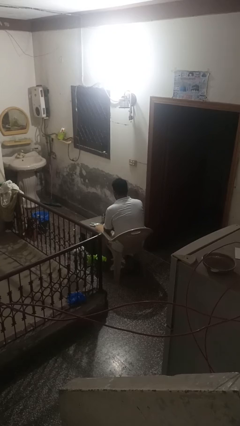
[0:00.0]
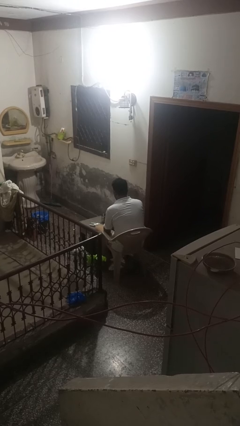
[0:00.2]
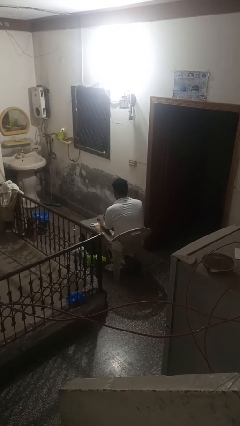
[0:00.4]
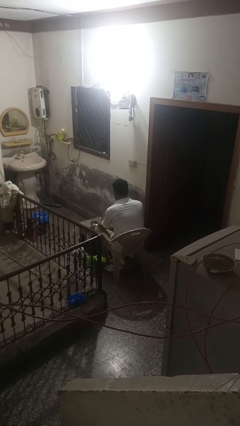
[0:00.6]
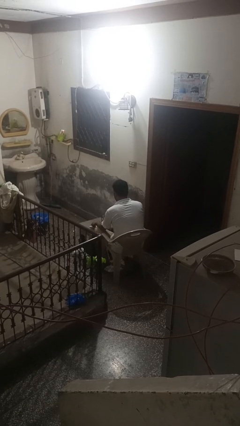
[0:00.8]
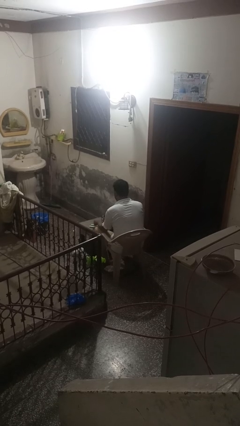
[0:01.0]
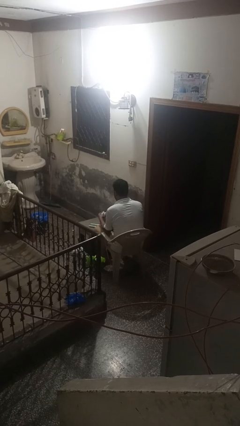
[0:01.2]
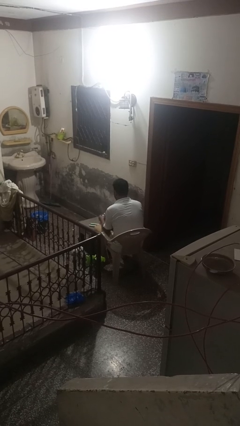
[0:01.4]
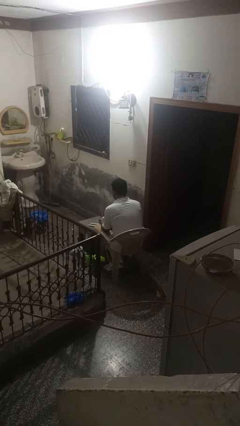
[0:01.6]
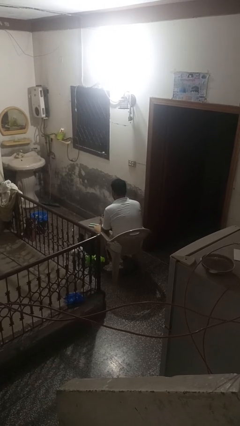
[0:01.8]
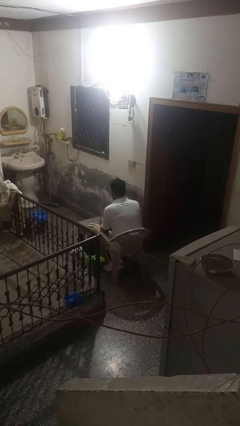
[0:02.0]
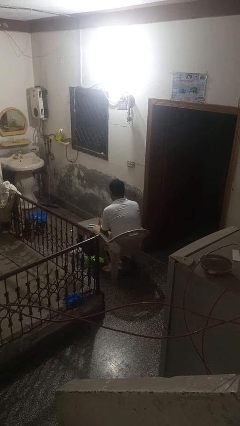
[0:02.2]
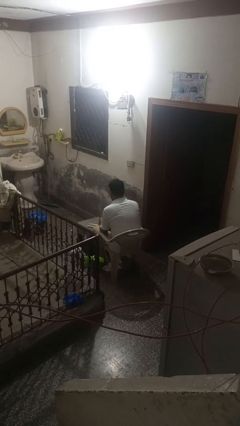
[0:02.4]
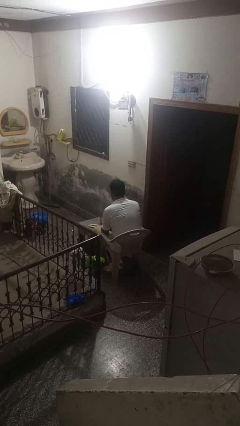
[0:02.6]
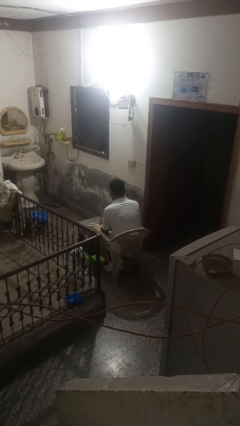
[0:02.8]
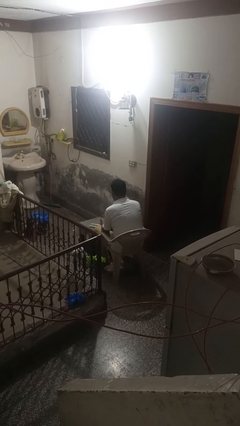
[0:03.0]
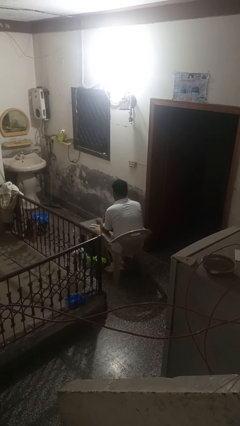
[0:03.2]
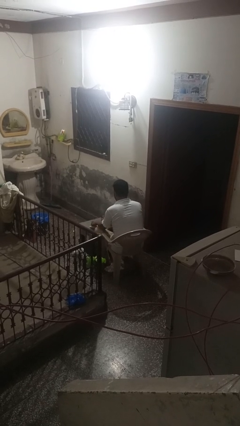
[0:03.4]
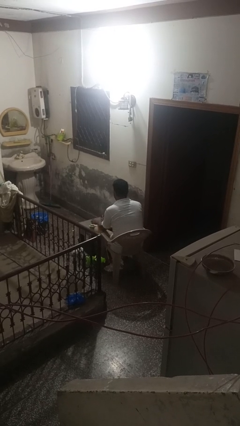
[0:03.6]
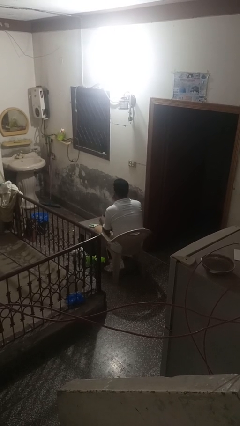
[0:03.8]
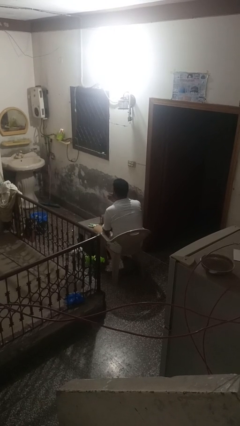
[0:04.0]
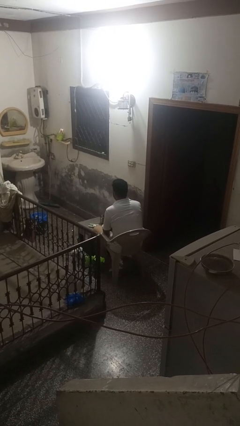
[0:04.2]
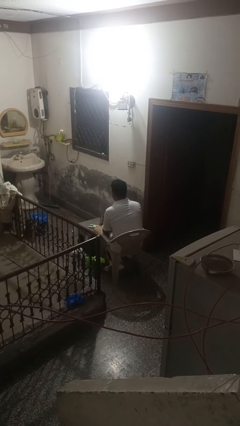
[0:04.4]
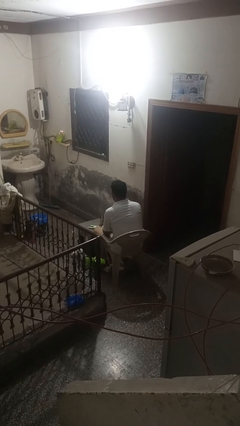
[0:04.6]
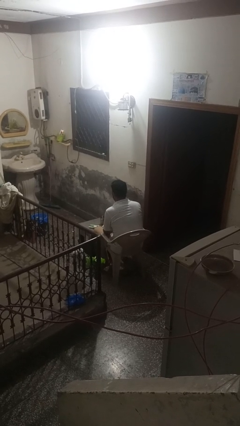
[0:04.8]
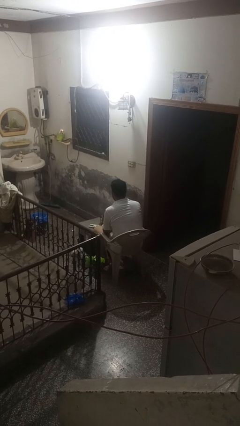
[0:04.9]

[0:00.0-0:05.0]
person takes medicine pills

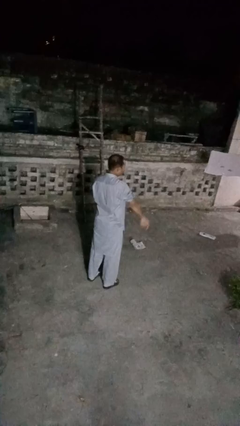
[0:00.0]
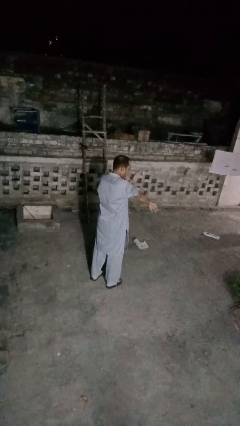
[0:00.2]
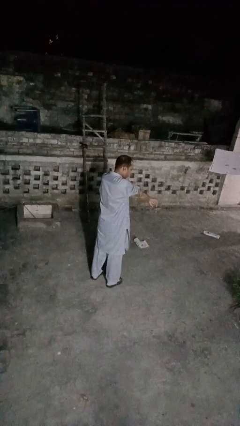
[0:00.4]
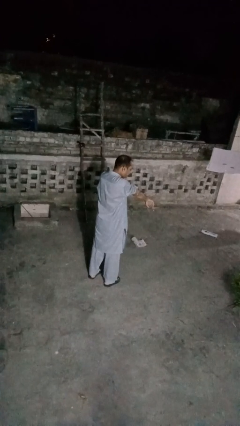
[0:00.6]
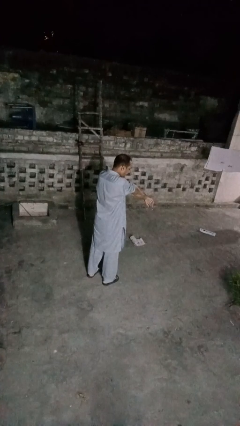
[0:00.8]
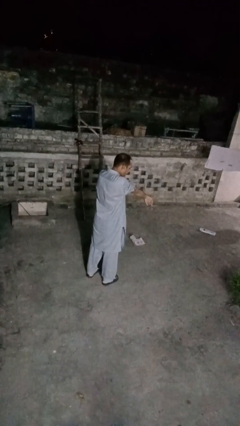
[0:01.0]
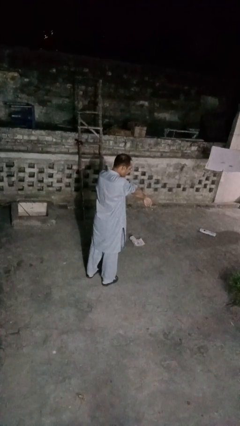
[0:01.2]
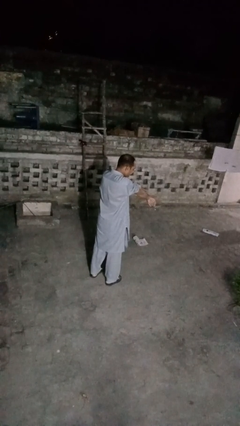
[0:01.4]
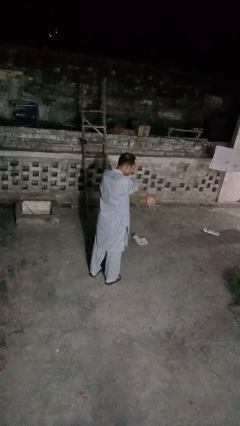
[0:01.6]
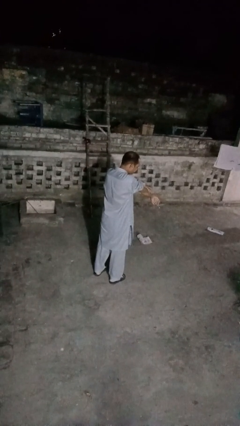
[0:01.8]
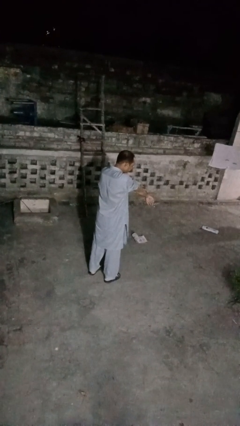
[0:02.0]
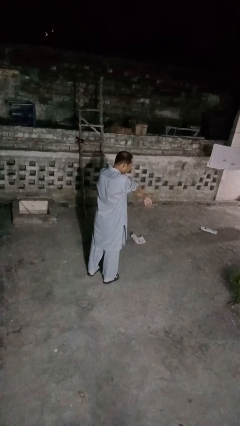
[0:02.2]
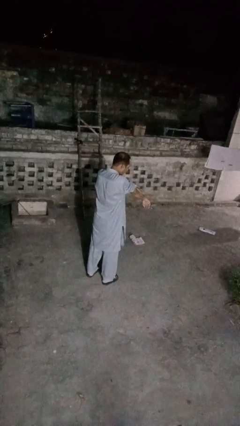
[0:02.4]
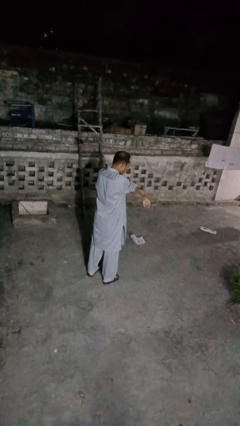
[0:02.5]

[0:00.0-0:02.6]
person swats bug

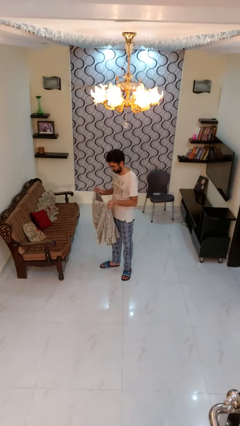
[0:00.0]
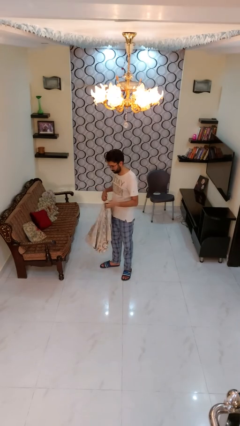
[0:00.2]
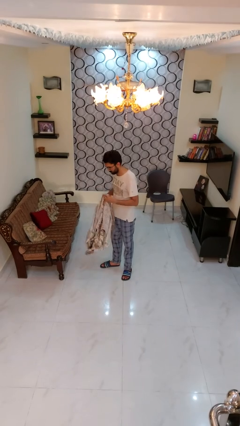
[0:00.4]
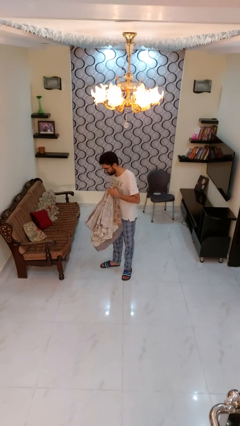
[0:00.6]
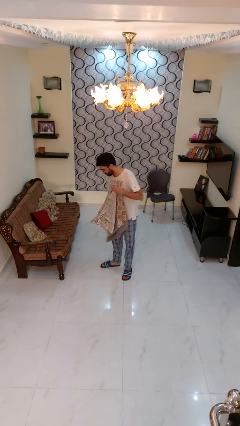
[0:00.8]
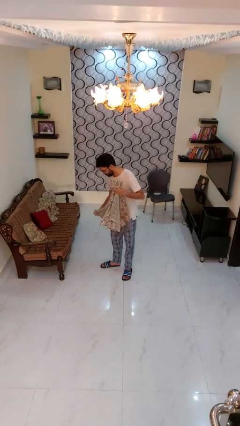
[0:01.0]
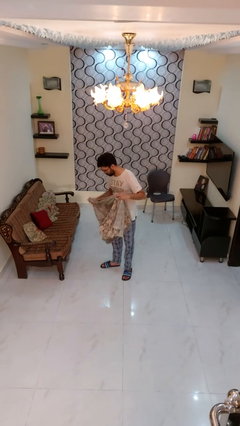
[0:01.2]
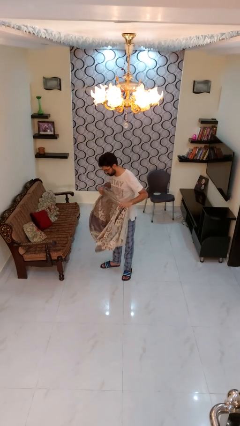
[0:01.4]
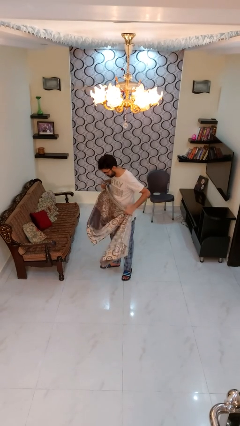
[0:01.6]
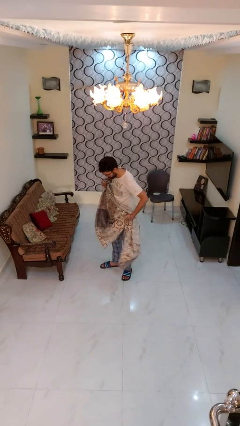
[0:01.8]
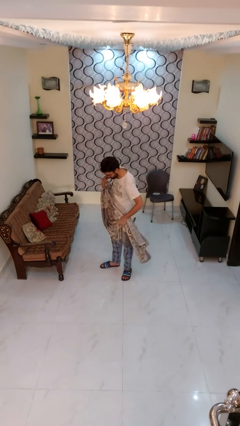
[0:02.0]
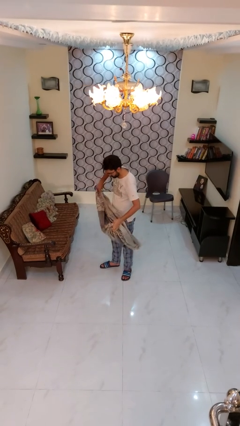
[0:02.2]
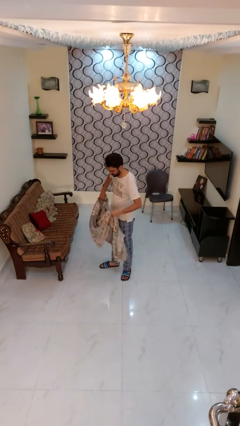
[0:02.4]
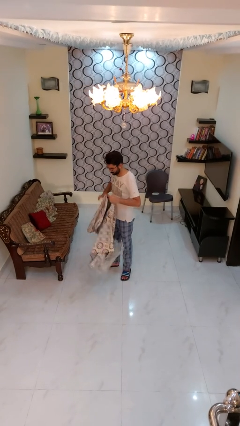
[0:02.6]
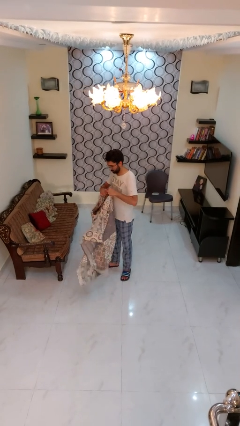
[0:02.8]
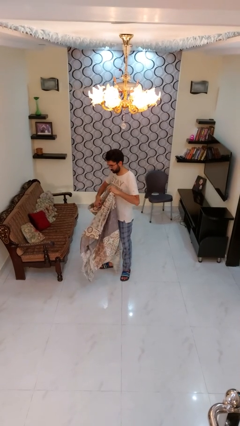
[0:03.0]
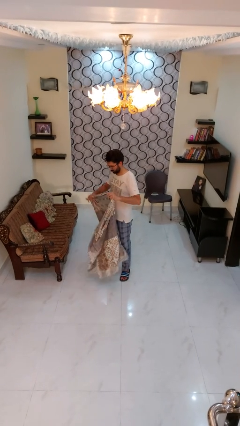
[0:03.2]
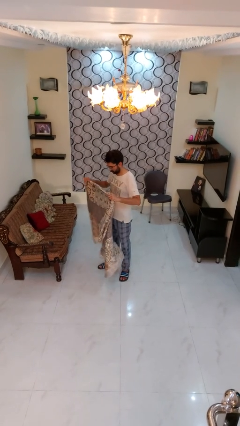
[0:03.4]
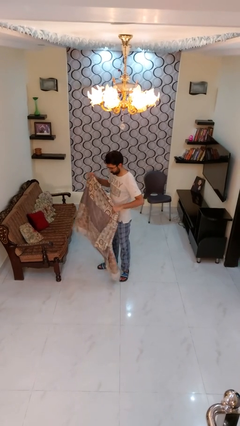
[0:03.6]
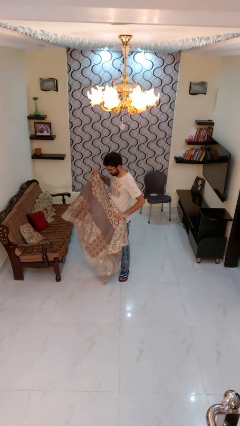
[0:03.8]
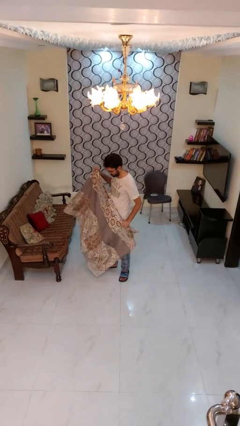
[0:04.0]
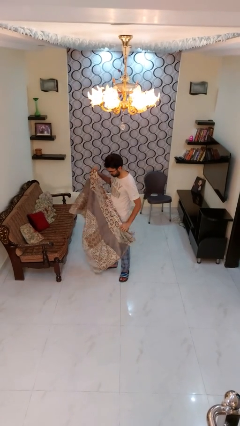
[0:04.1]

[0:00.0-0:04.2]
person unfolds blanket

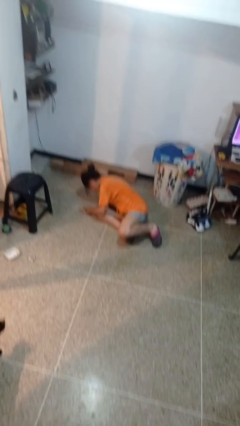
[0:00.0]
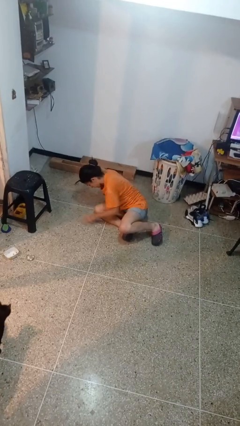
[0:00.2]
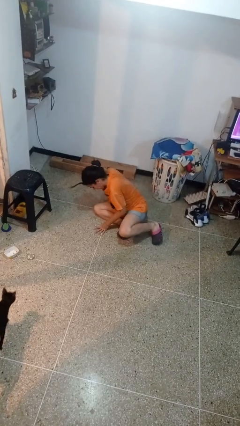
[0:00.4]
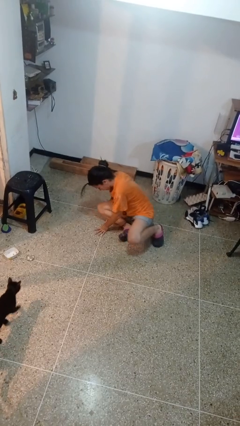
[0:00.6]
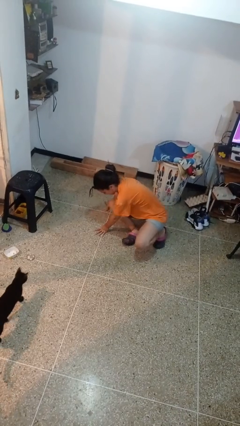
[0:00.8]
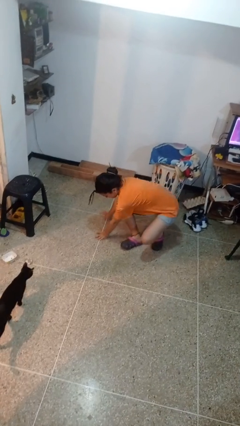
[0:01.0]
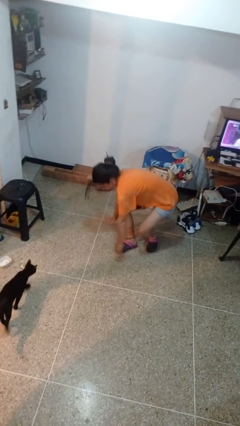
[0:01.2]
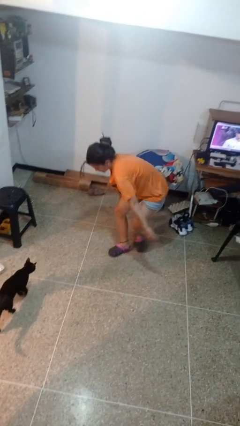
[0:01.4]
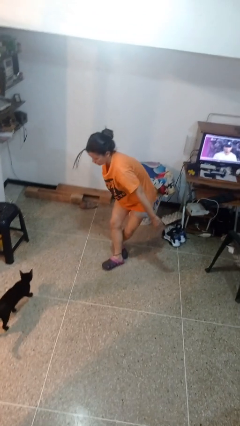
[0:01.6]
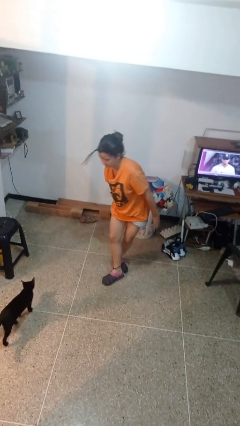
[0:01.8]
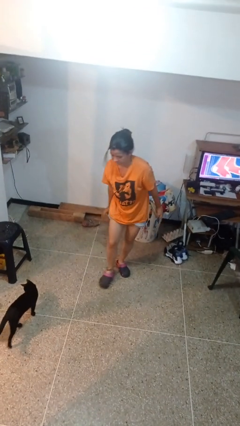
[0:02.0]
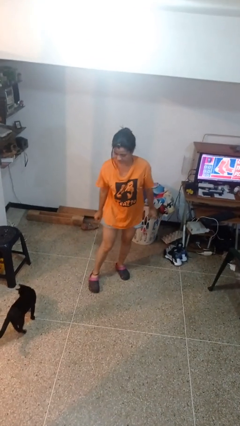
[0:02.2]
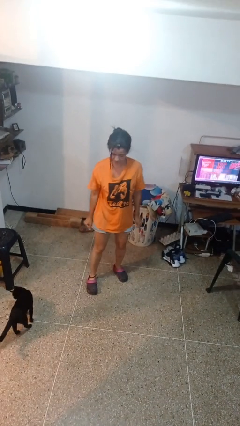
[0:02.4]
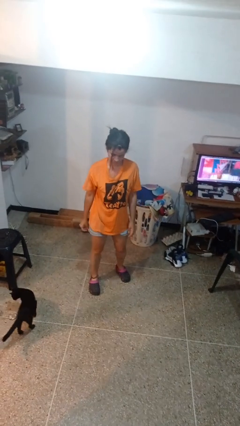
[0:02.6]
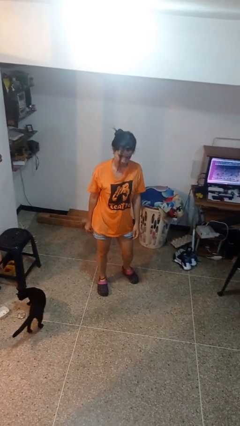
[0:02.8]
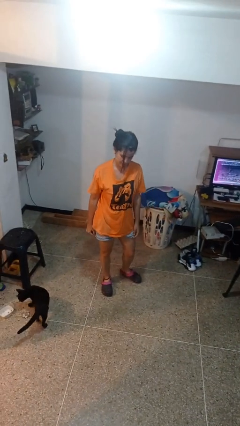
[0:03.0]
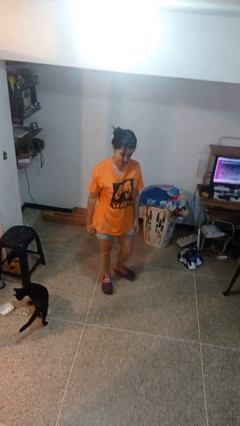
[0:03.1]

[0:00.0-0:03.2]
person stands up from floor

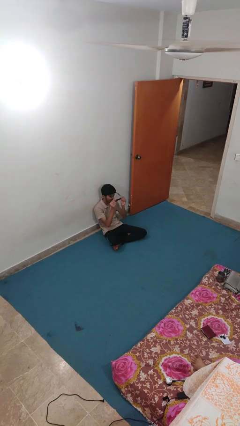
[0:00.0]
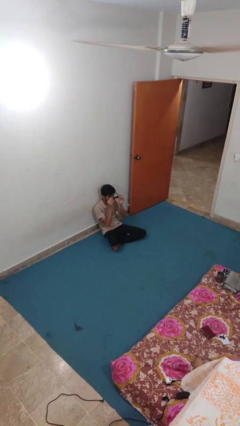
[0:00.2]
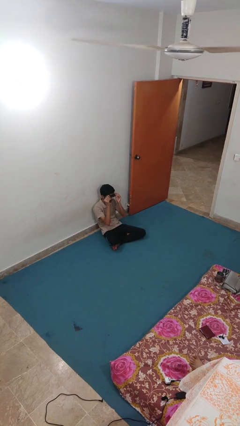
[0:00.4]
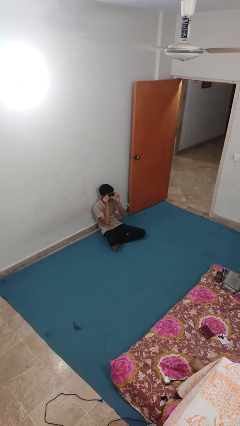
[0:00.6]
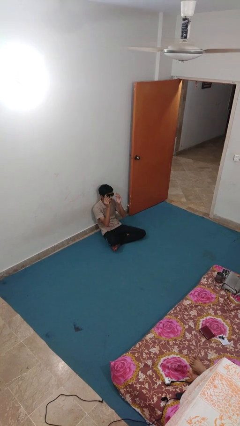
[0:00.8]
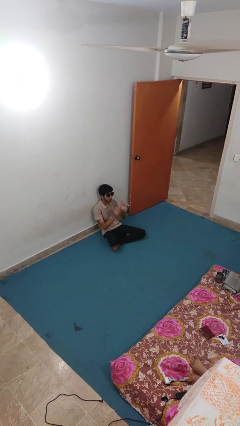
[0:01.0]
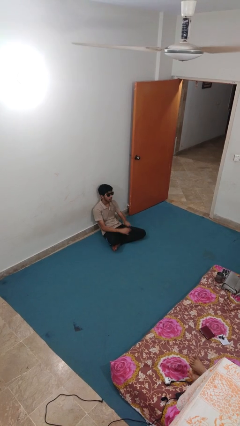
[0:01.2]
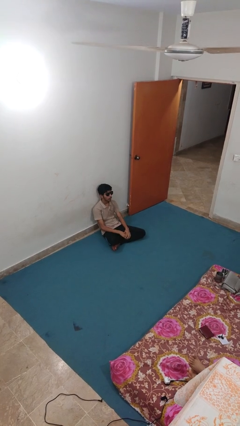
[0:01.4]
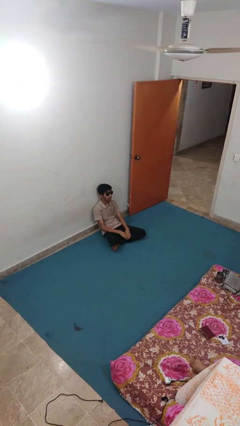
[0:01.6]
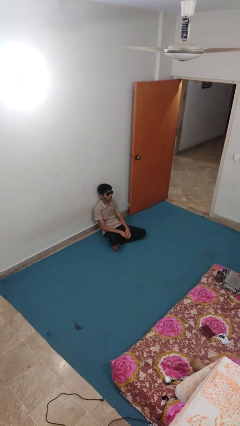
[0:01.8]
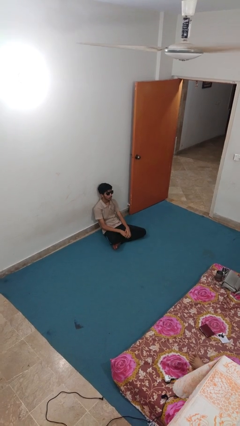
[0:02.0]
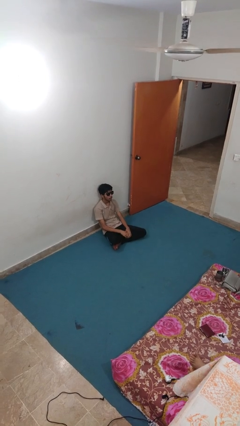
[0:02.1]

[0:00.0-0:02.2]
person puts on sunglasses

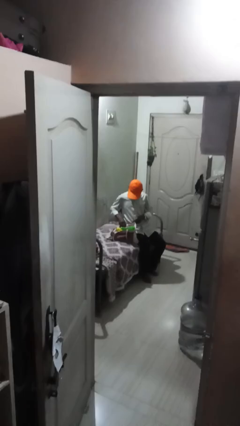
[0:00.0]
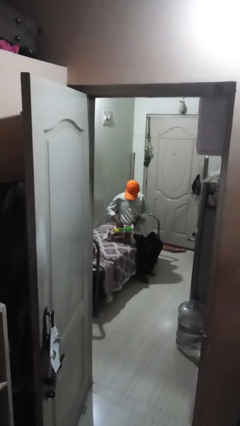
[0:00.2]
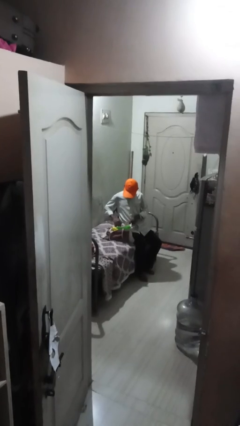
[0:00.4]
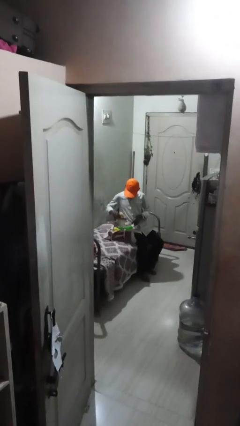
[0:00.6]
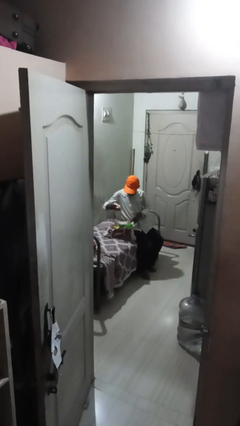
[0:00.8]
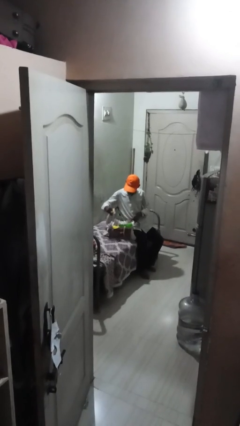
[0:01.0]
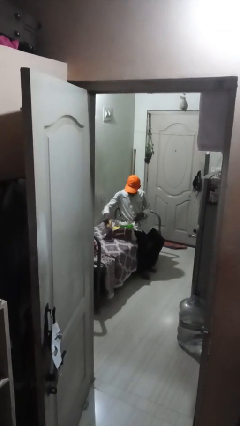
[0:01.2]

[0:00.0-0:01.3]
person takes object from bag
